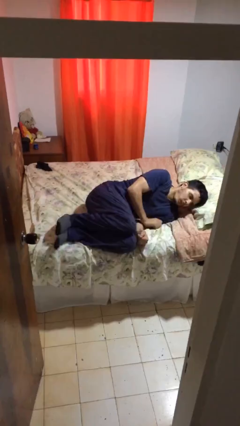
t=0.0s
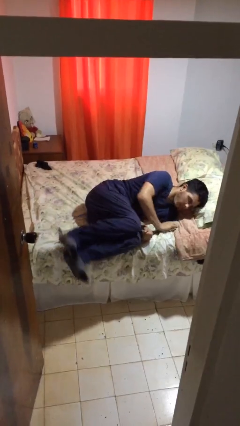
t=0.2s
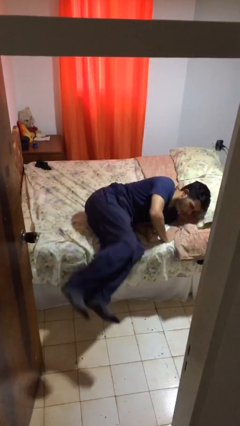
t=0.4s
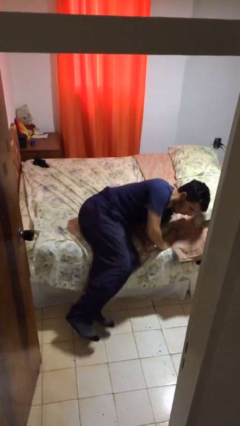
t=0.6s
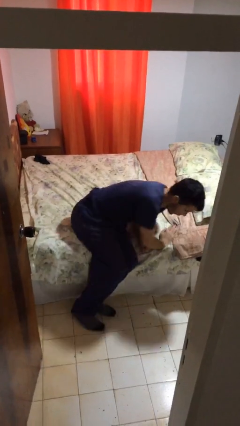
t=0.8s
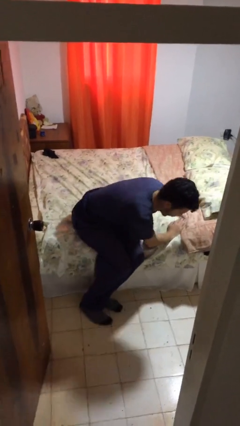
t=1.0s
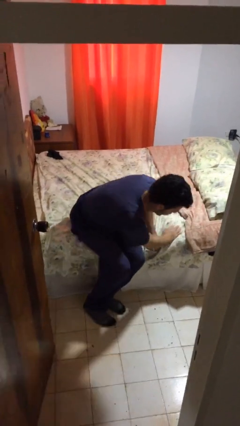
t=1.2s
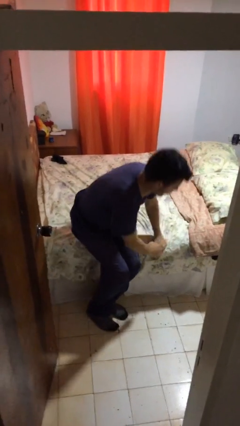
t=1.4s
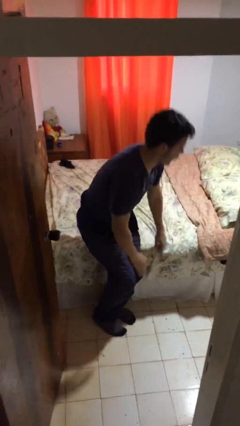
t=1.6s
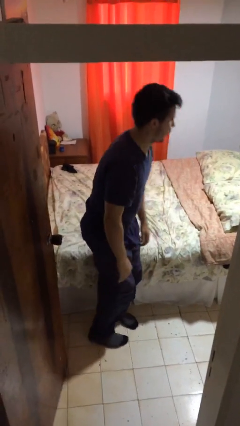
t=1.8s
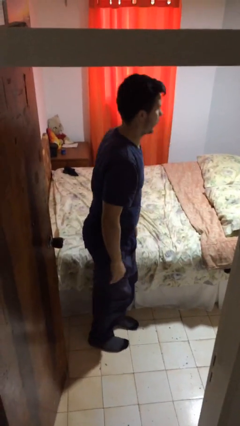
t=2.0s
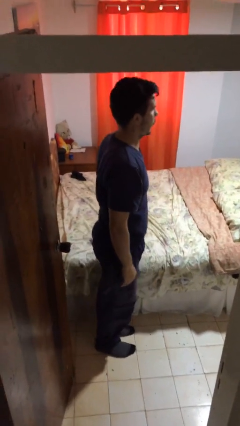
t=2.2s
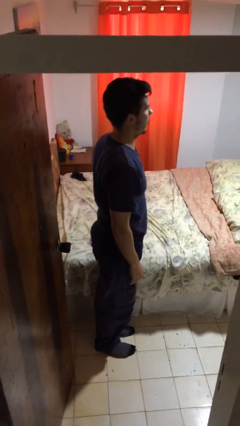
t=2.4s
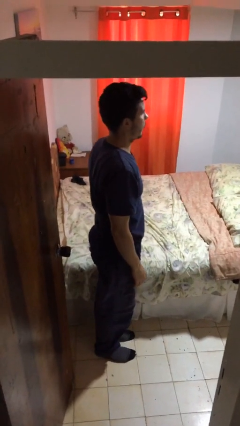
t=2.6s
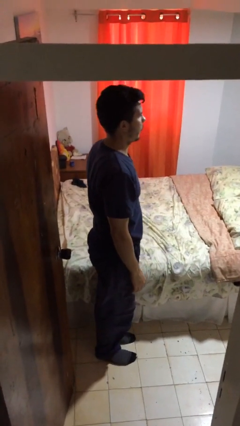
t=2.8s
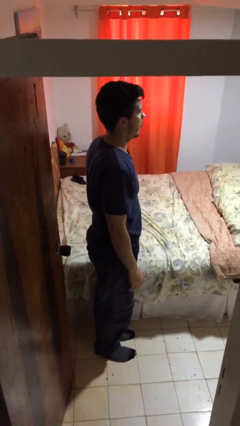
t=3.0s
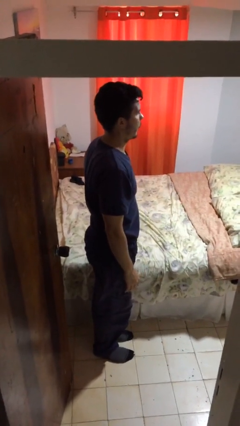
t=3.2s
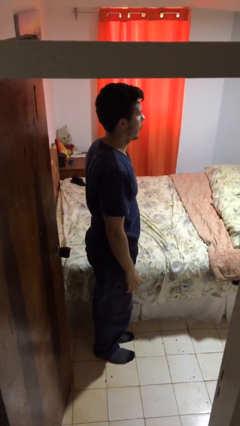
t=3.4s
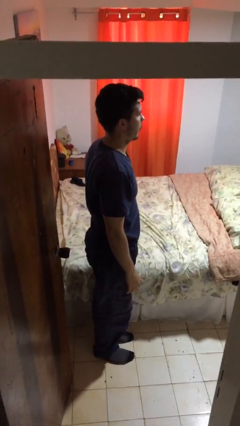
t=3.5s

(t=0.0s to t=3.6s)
person stands up

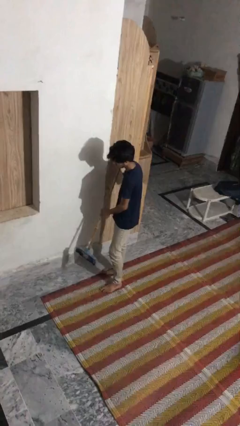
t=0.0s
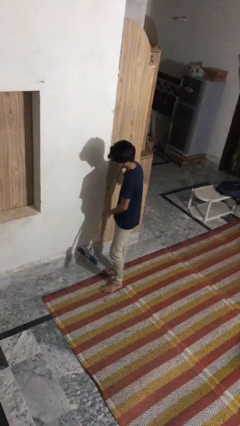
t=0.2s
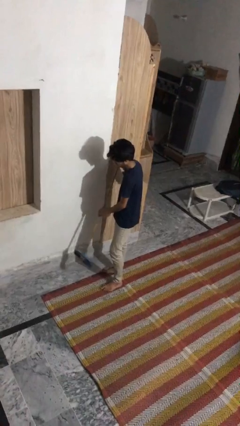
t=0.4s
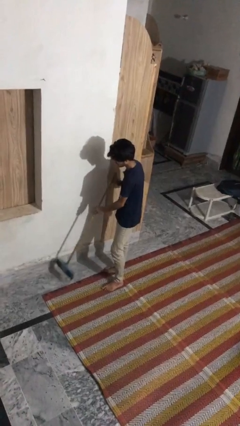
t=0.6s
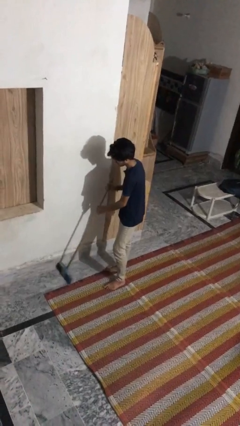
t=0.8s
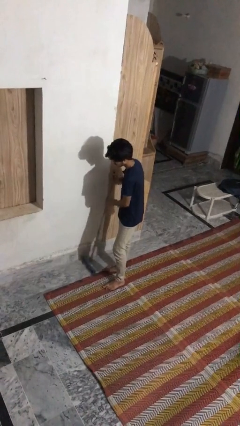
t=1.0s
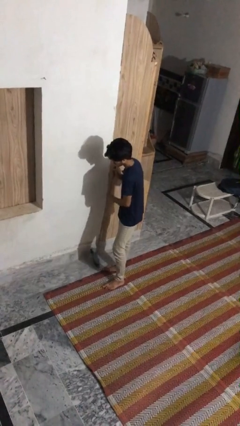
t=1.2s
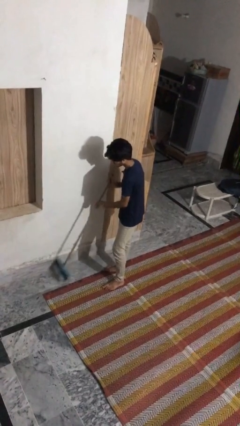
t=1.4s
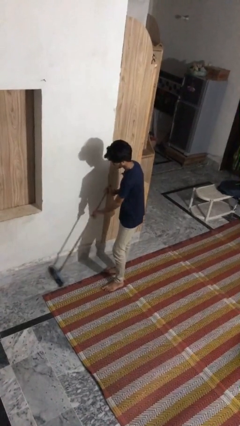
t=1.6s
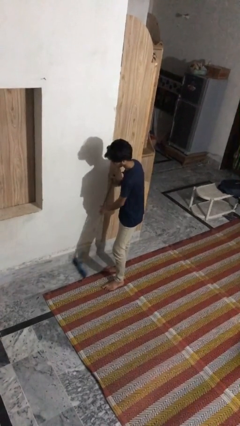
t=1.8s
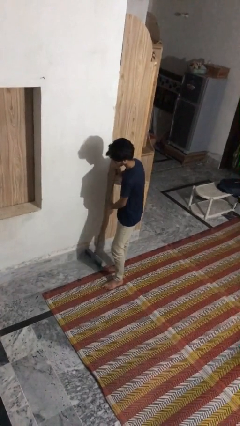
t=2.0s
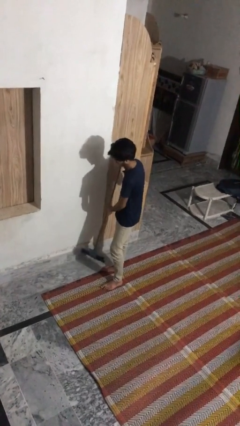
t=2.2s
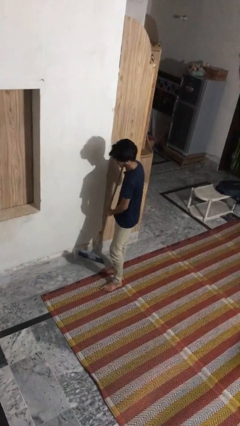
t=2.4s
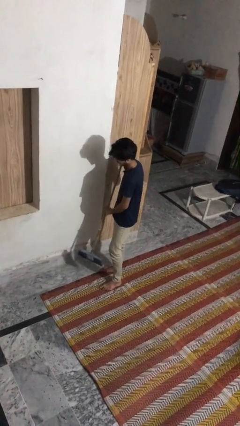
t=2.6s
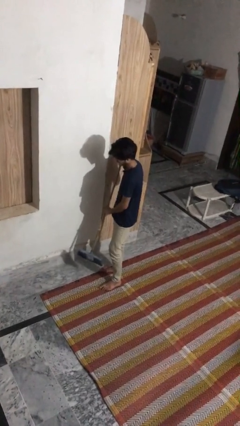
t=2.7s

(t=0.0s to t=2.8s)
person sweeps floor

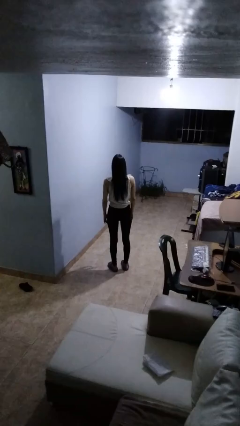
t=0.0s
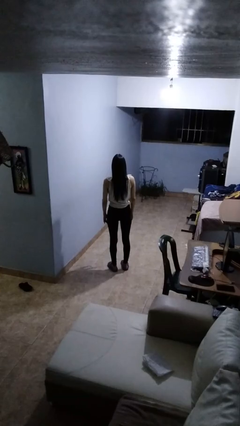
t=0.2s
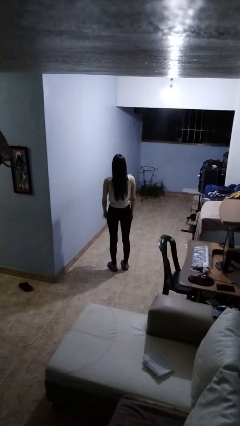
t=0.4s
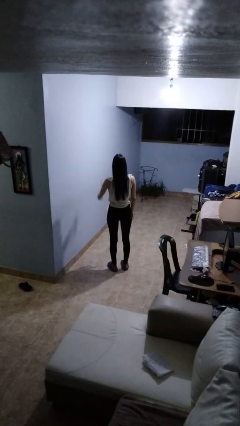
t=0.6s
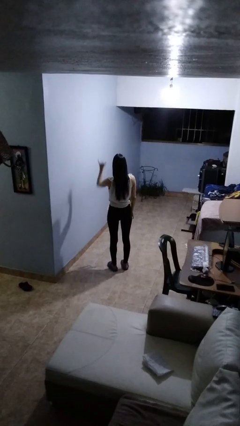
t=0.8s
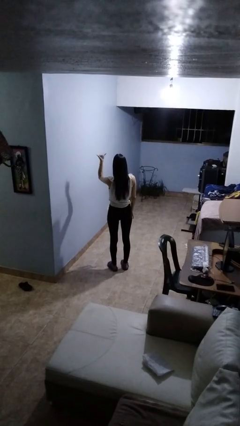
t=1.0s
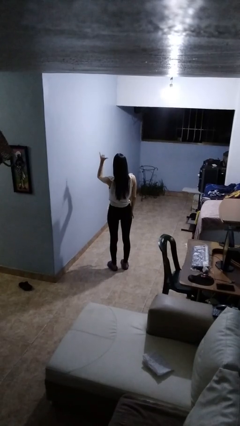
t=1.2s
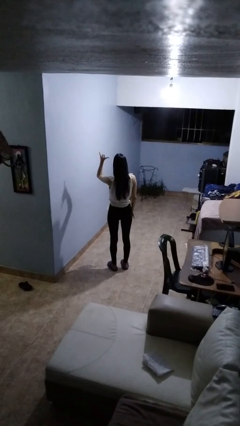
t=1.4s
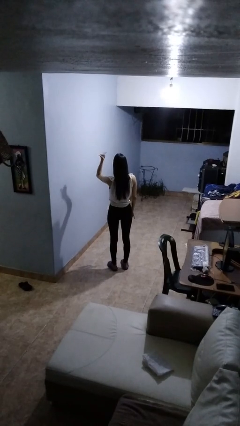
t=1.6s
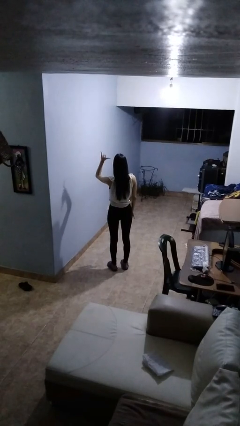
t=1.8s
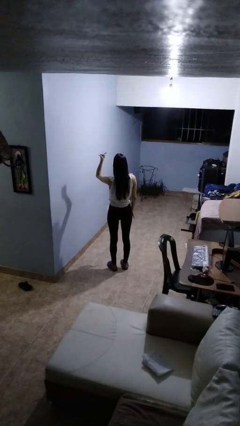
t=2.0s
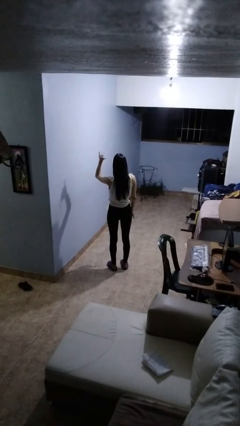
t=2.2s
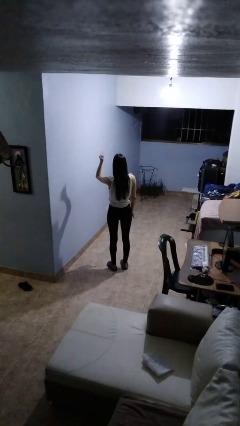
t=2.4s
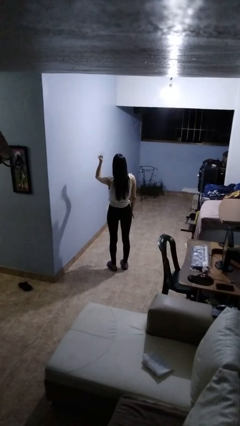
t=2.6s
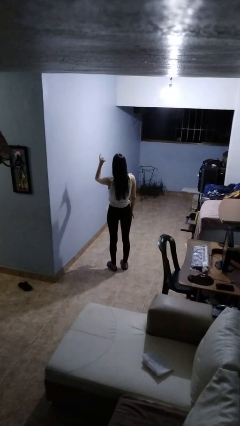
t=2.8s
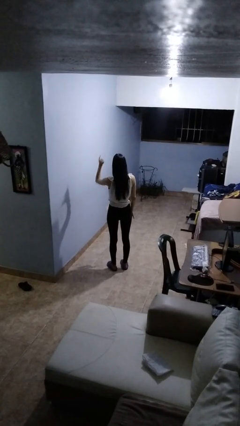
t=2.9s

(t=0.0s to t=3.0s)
person gestures hang loose

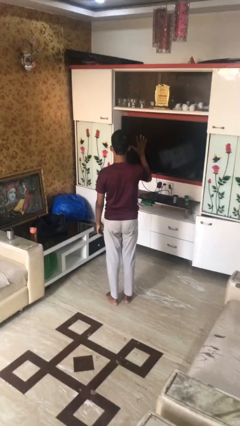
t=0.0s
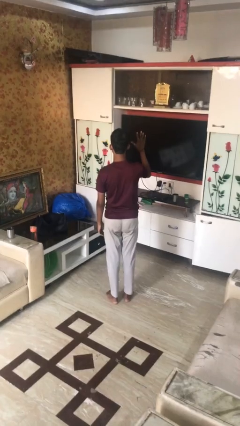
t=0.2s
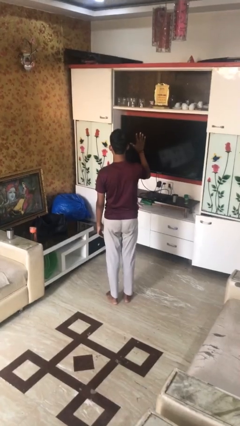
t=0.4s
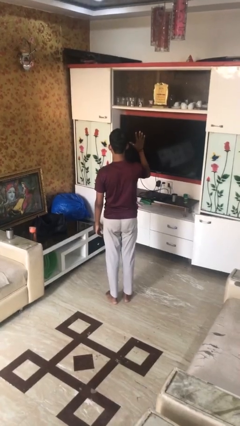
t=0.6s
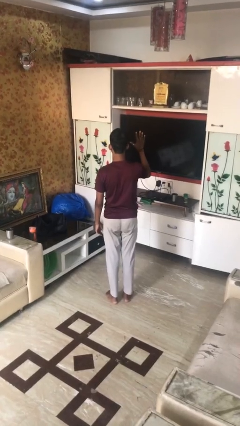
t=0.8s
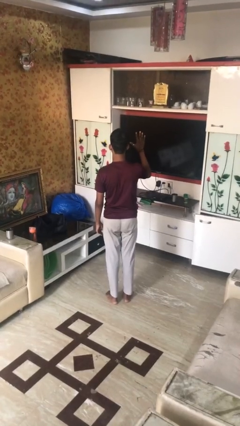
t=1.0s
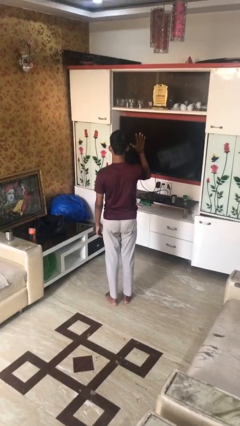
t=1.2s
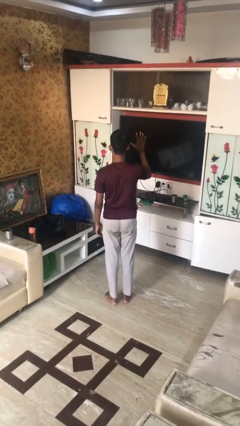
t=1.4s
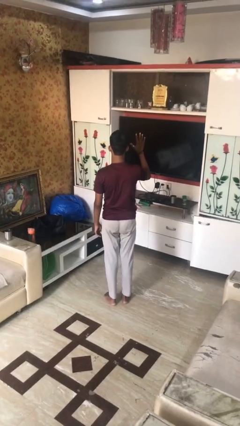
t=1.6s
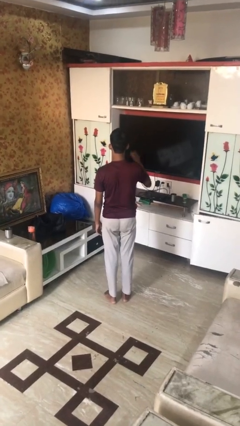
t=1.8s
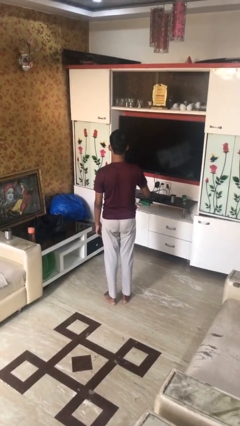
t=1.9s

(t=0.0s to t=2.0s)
person gestures number five

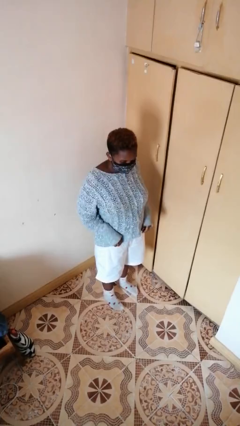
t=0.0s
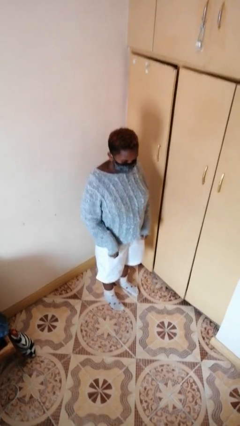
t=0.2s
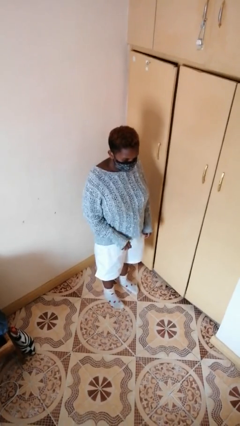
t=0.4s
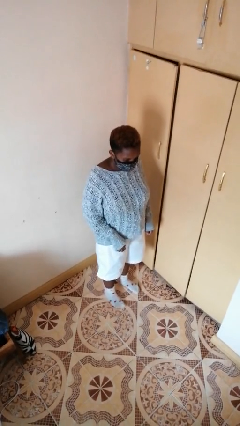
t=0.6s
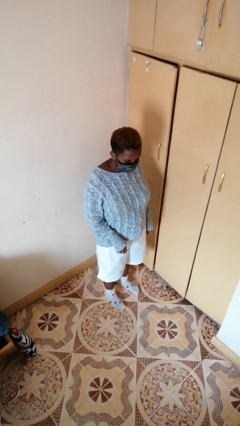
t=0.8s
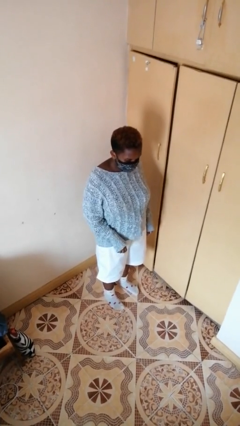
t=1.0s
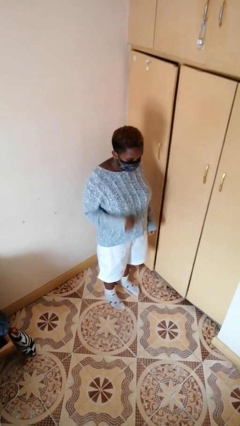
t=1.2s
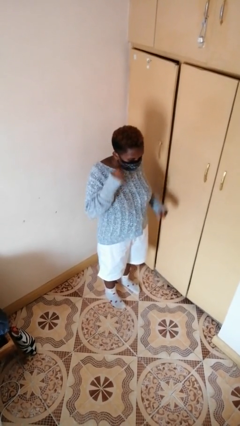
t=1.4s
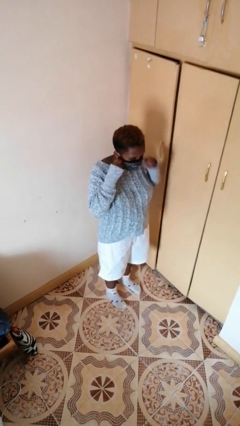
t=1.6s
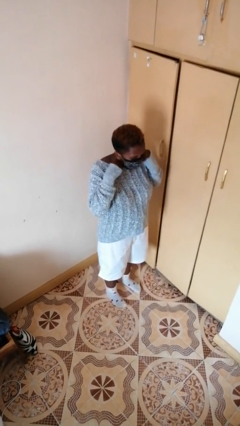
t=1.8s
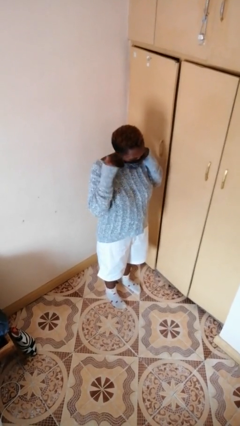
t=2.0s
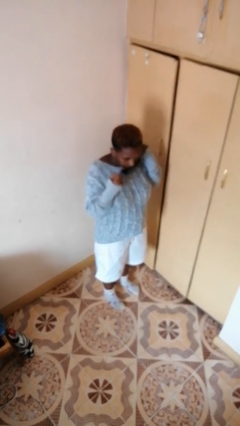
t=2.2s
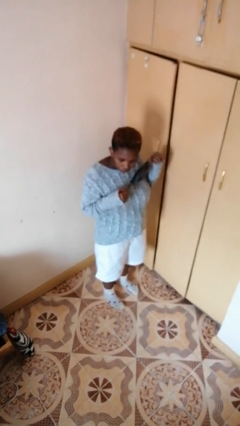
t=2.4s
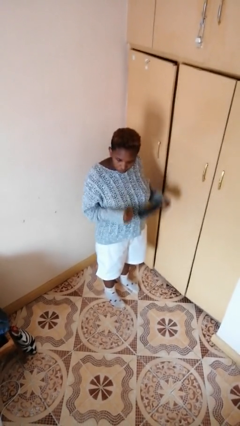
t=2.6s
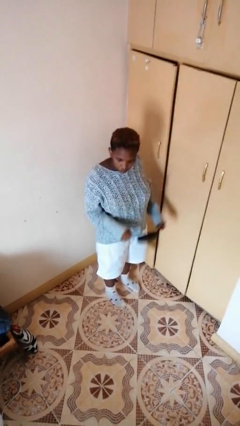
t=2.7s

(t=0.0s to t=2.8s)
person takes off facemask

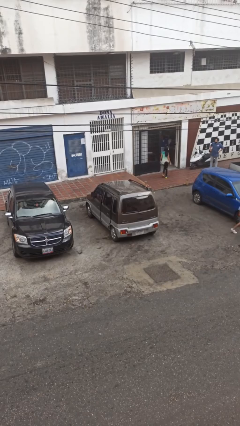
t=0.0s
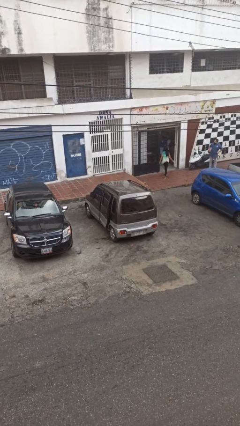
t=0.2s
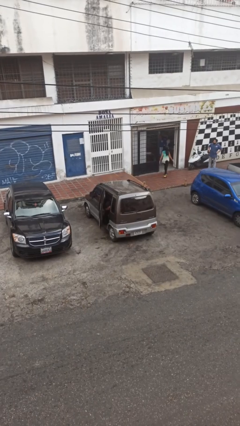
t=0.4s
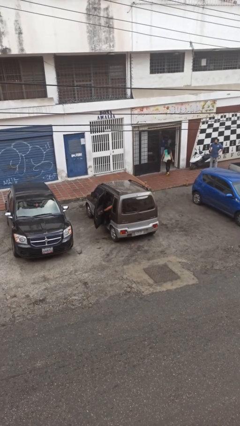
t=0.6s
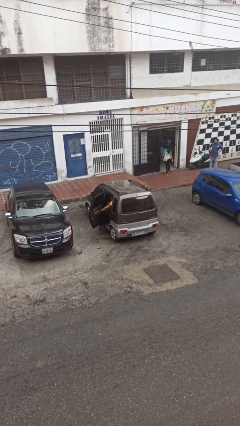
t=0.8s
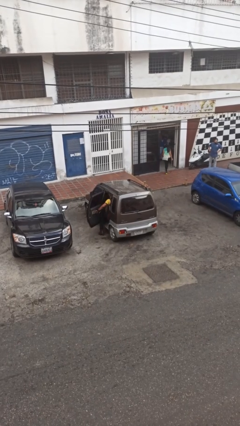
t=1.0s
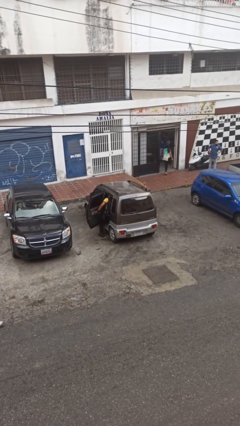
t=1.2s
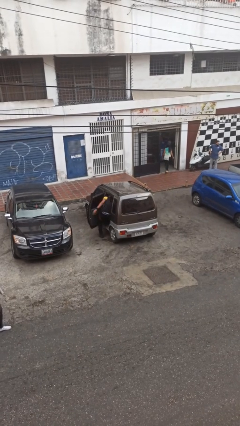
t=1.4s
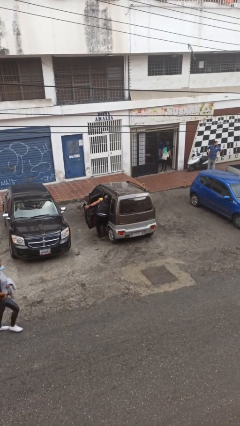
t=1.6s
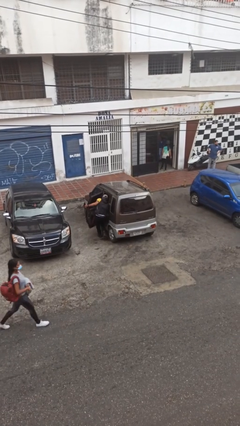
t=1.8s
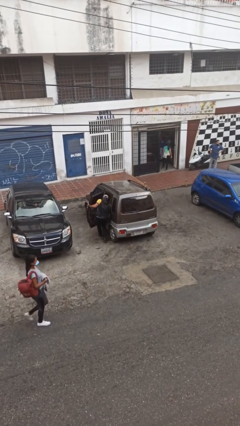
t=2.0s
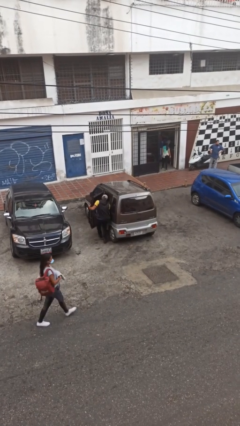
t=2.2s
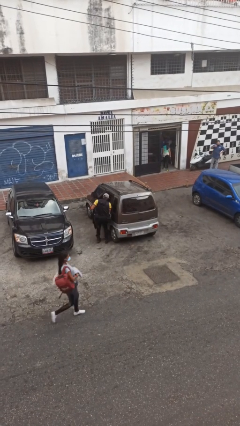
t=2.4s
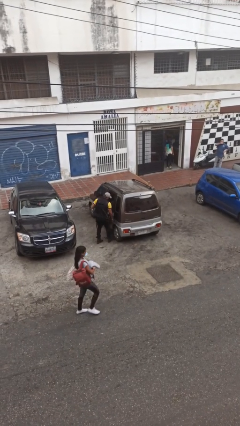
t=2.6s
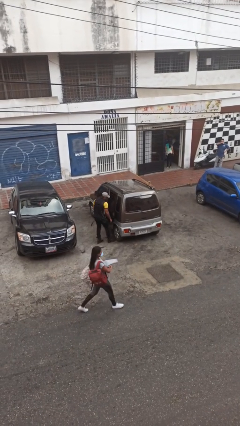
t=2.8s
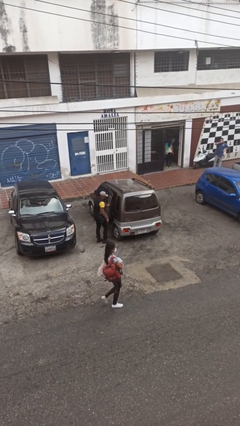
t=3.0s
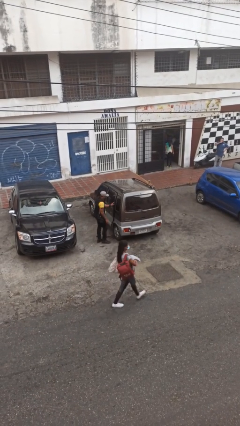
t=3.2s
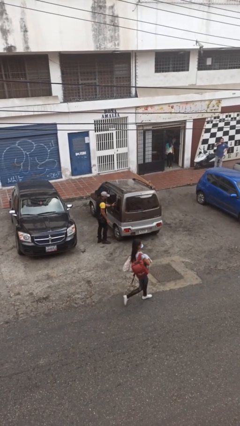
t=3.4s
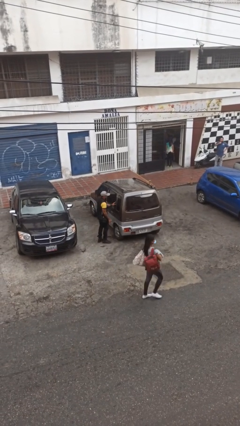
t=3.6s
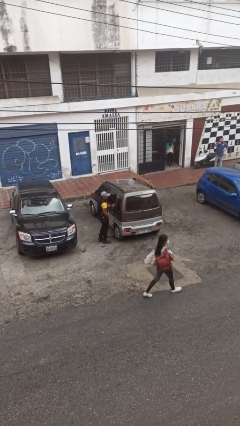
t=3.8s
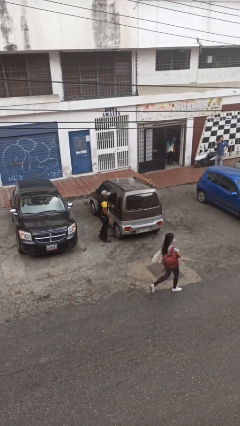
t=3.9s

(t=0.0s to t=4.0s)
car drops off person
